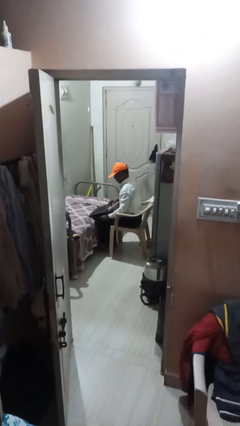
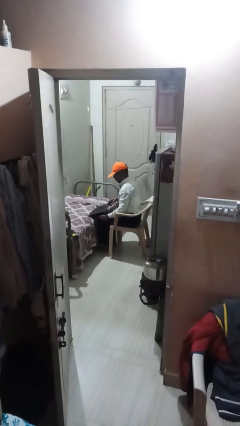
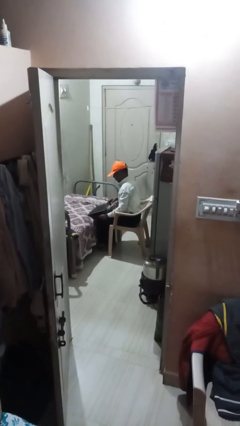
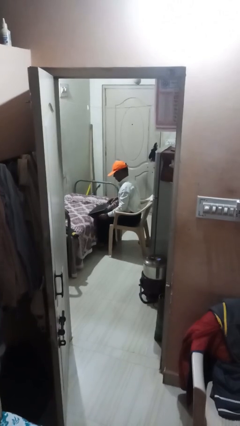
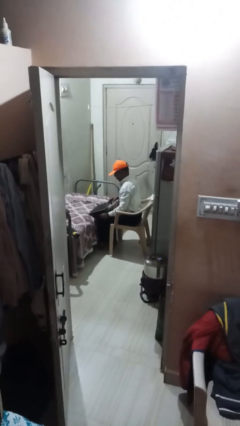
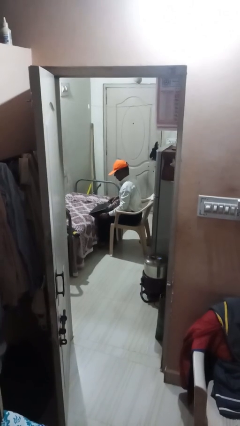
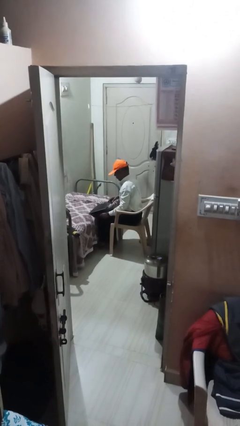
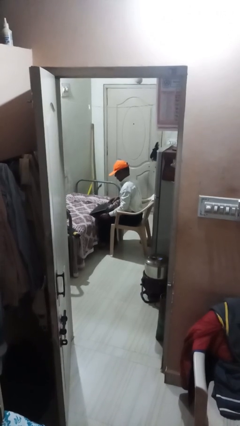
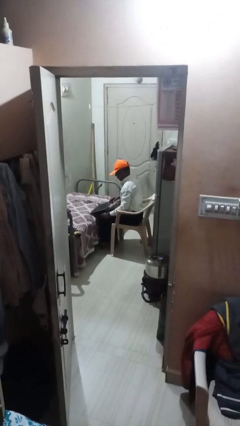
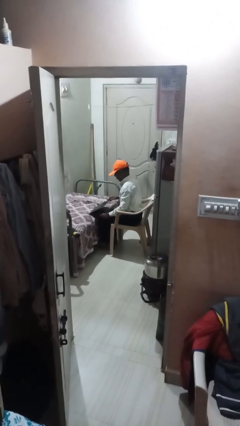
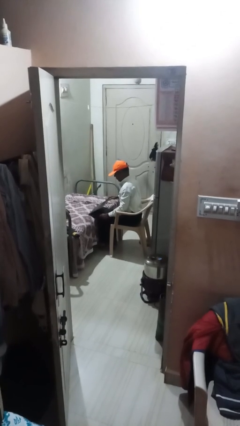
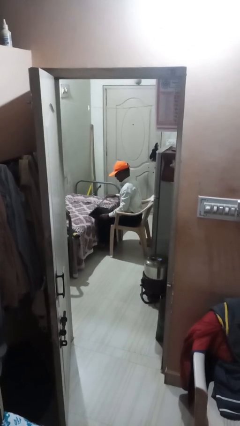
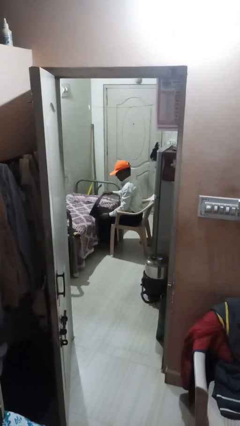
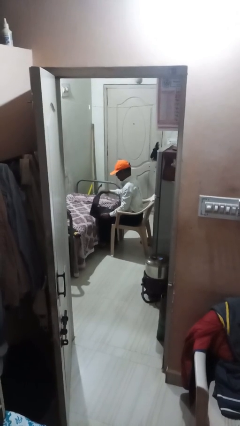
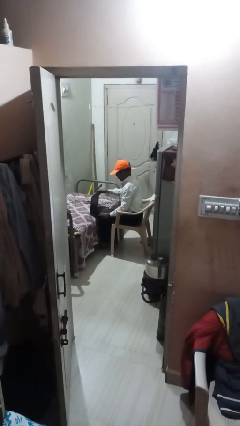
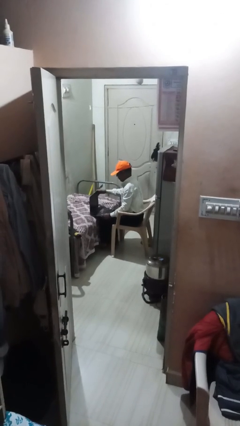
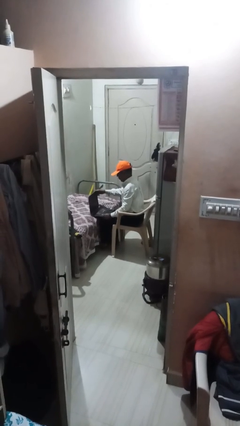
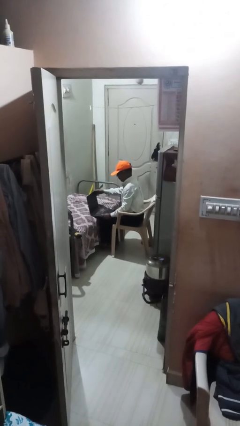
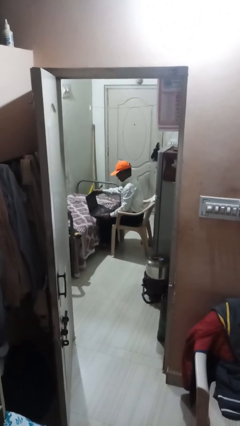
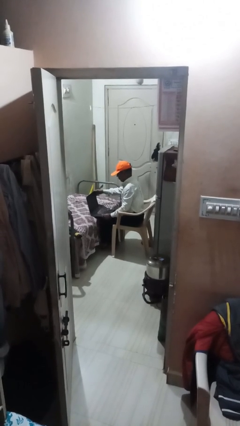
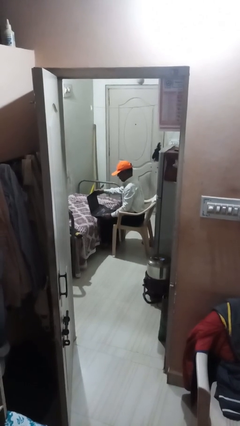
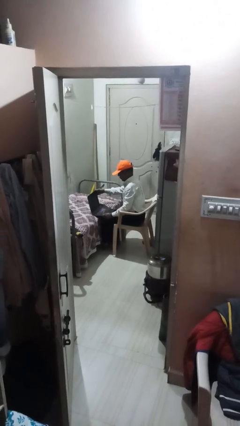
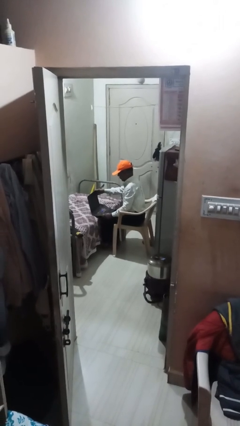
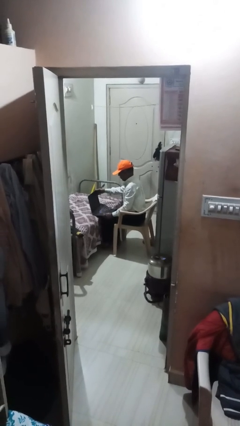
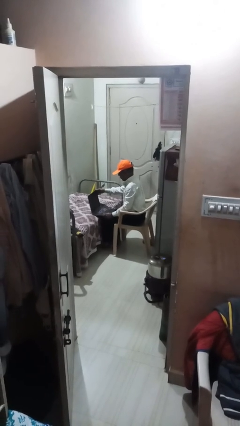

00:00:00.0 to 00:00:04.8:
person interacts with laptop

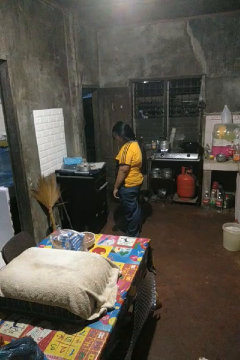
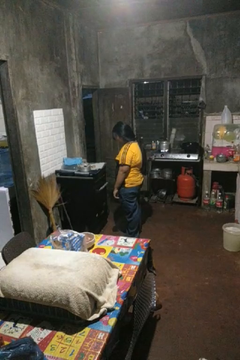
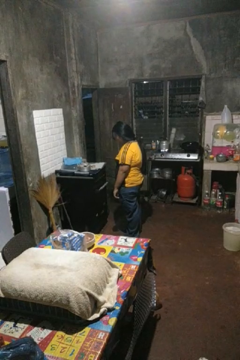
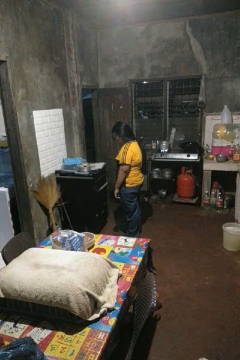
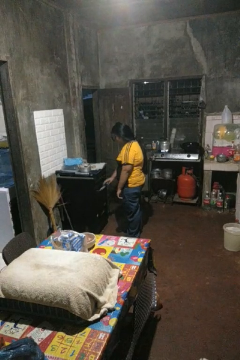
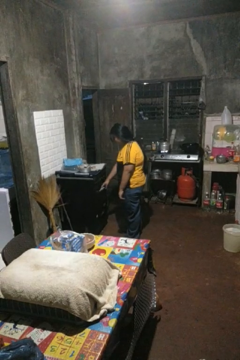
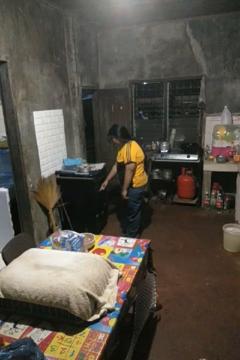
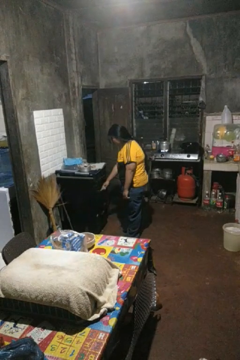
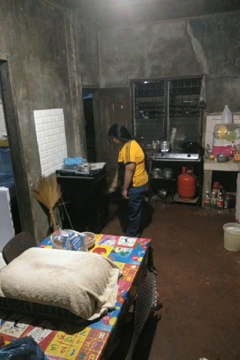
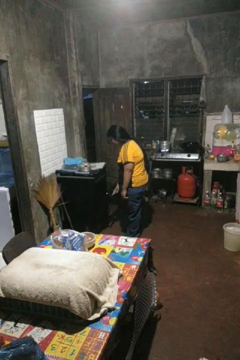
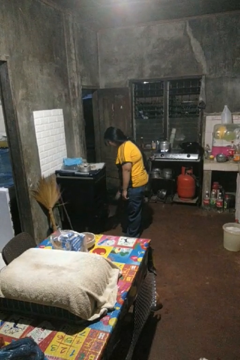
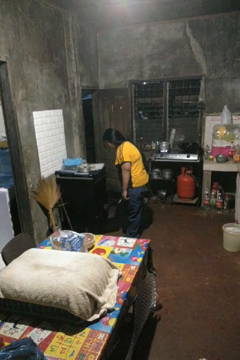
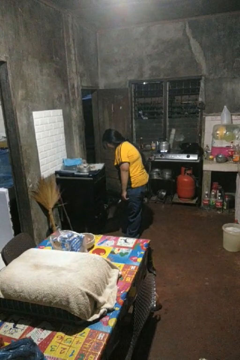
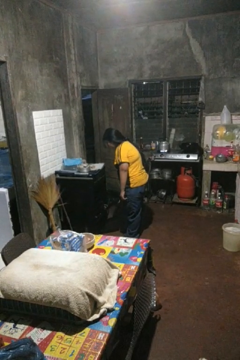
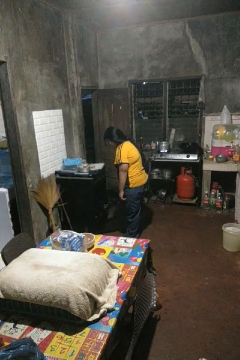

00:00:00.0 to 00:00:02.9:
person opens oven door

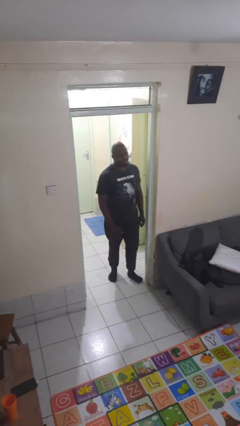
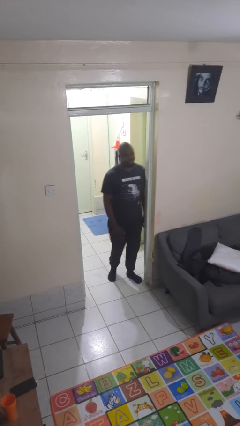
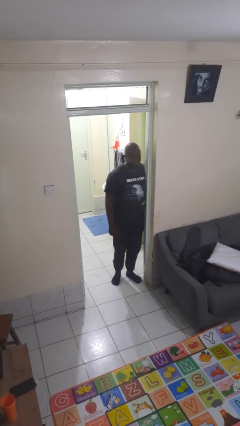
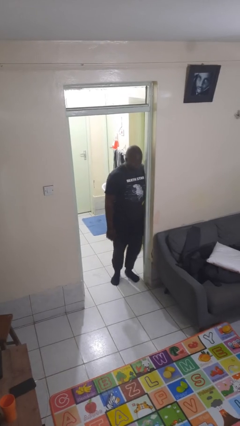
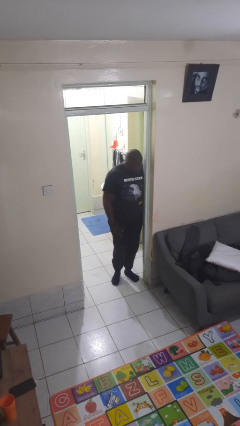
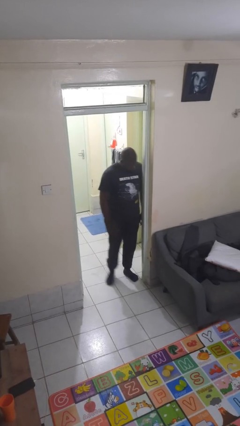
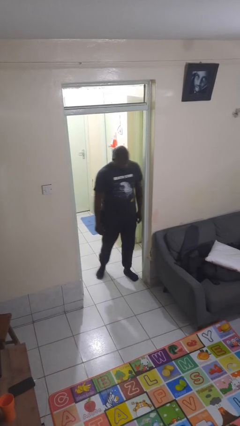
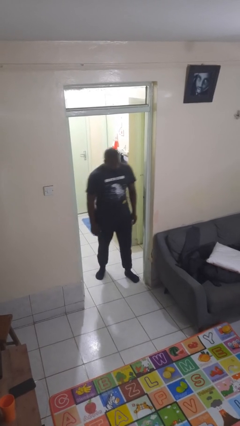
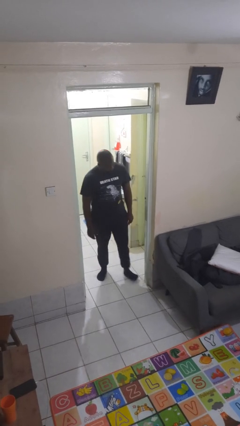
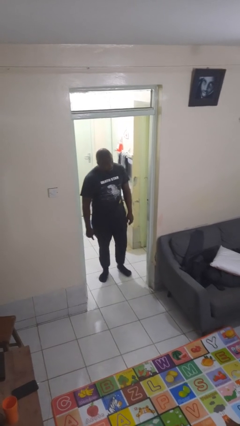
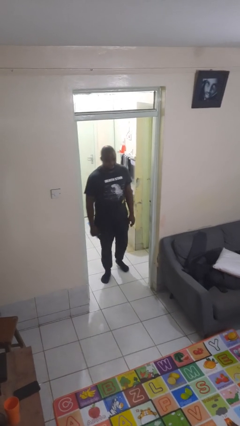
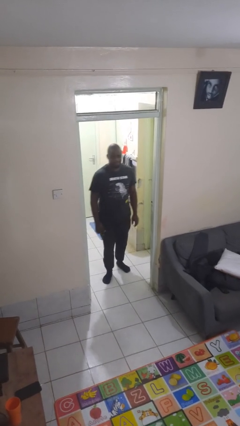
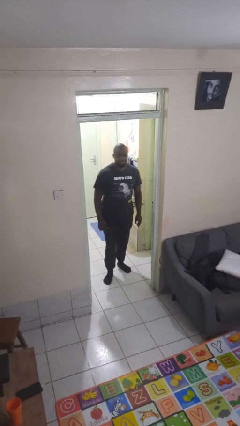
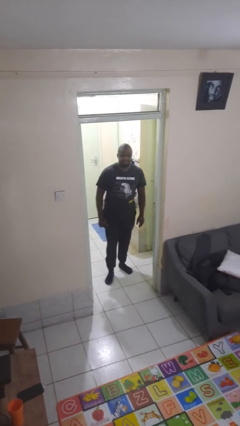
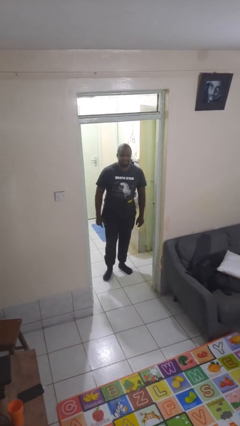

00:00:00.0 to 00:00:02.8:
person bumps into wall

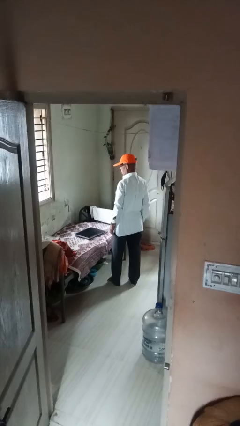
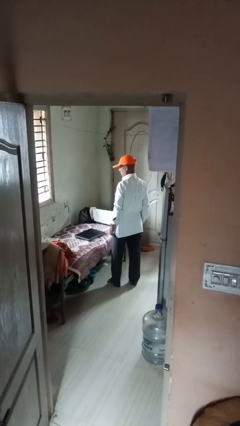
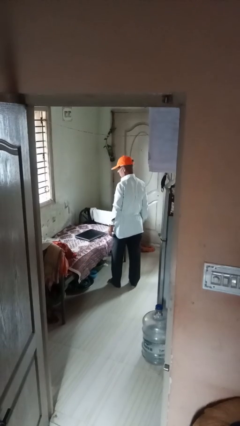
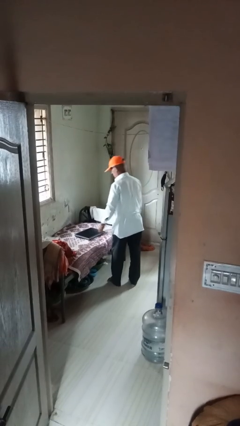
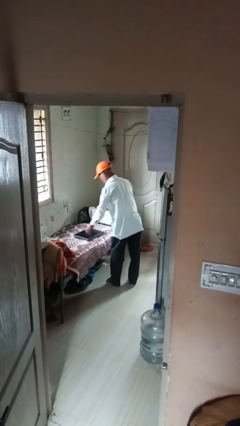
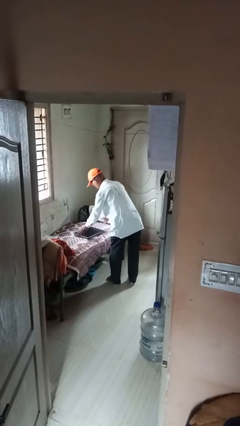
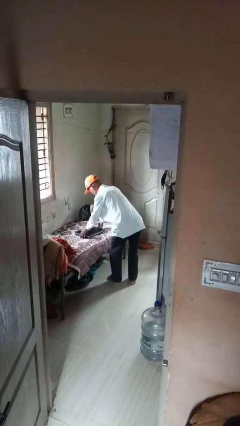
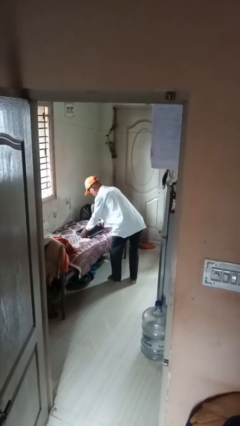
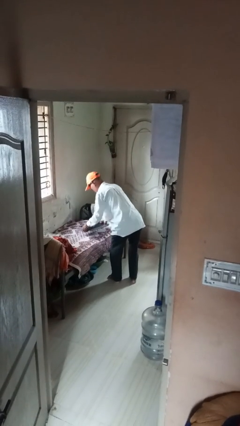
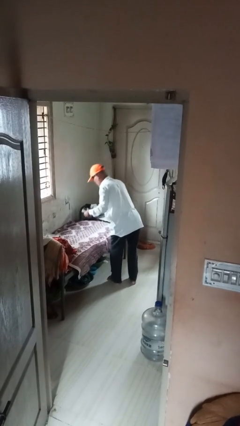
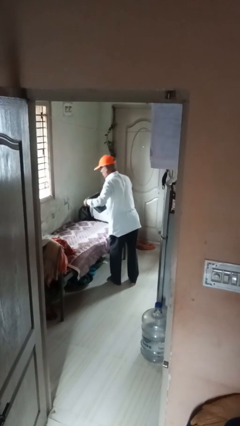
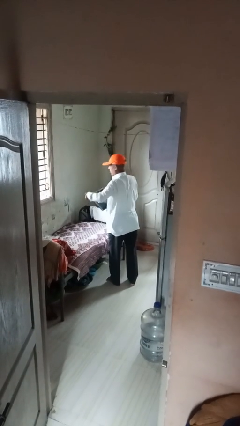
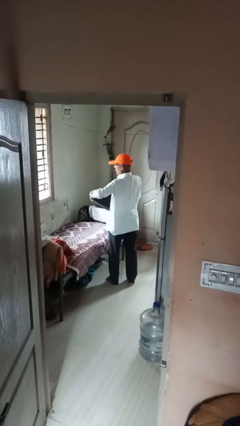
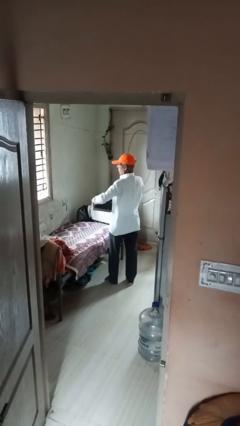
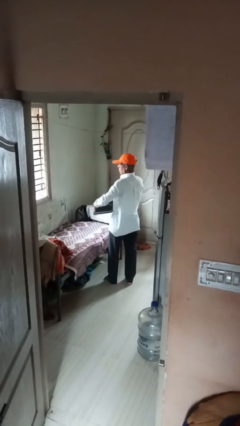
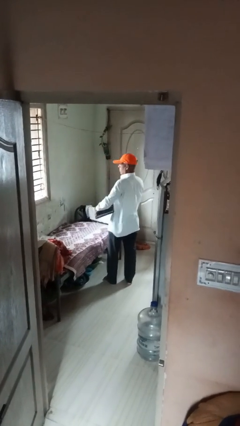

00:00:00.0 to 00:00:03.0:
person picks up object from bed

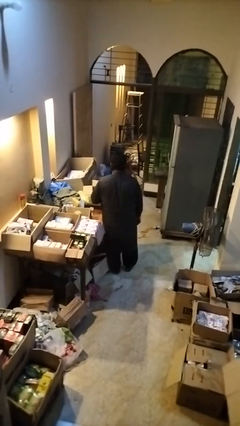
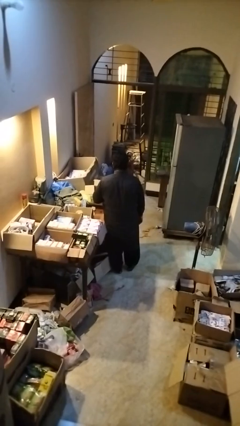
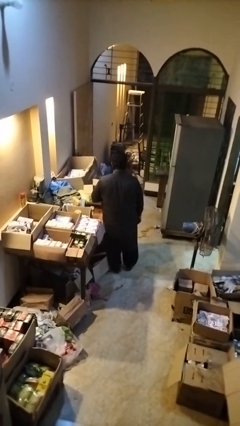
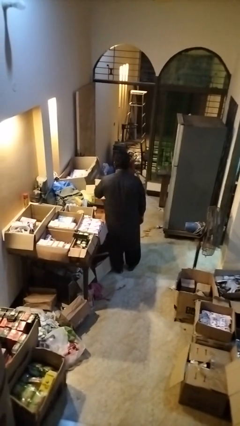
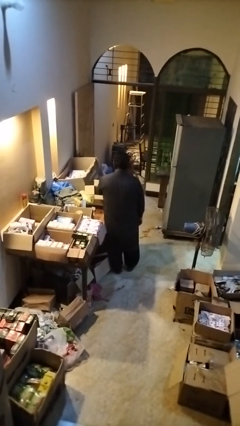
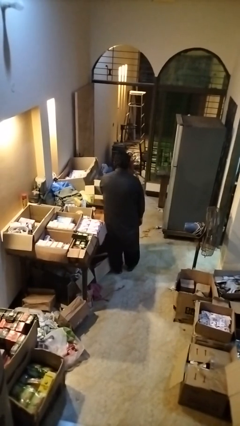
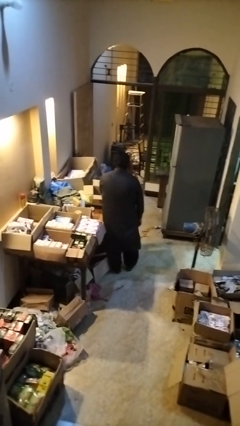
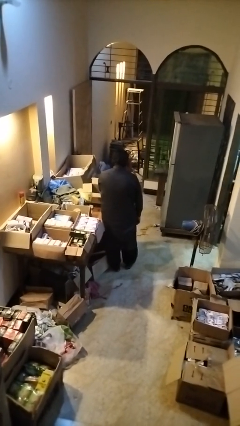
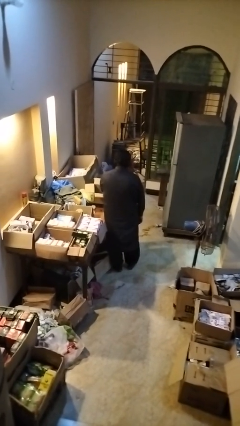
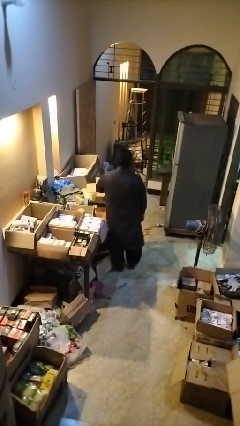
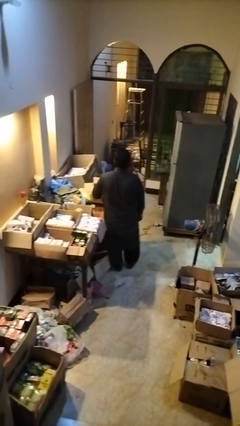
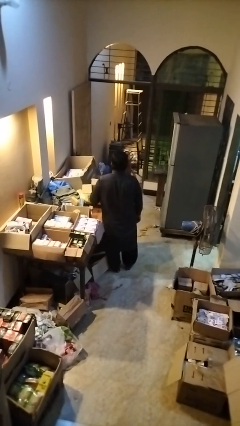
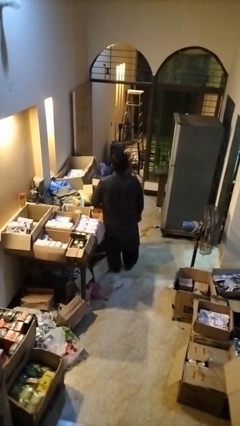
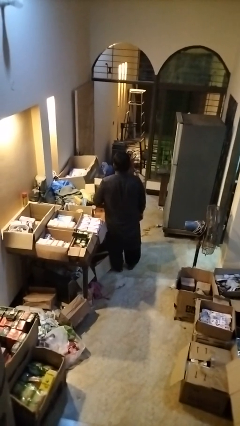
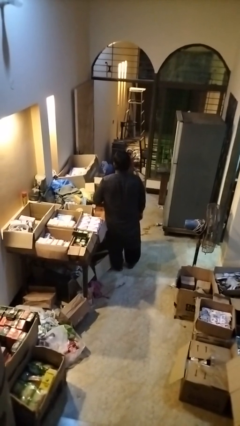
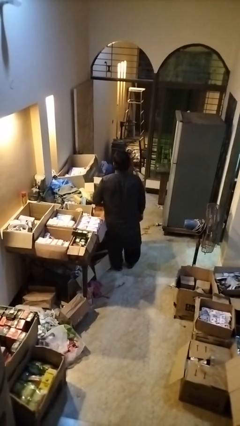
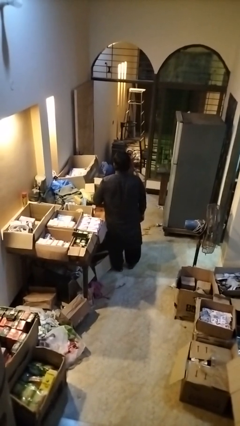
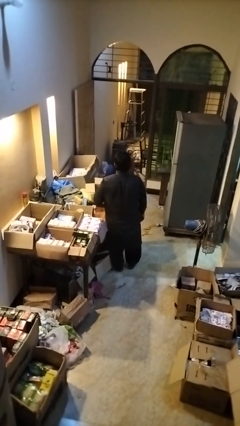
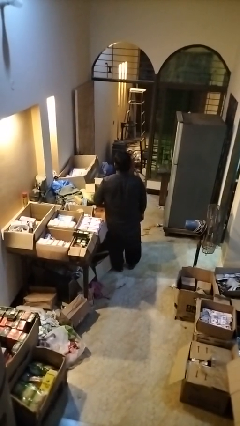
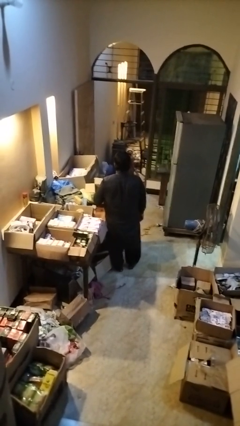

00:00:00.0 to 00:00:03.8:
person takes object from box

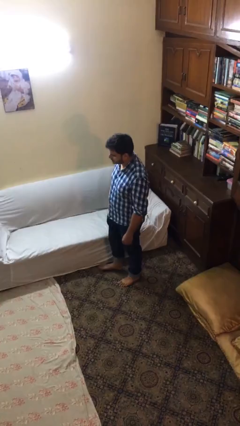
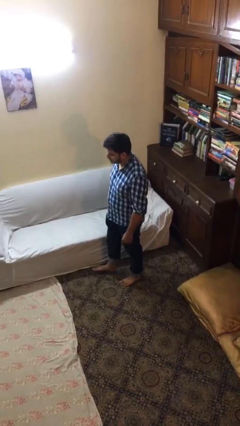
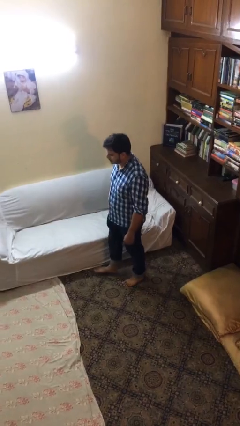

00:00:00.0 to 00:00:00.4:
person texts on phone
